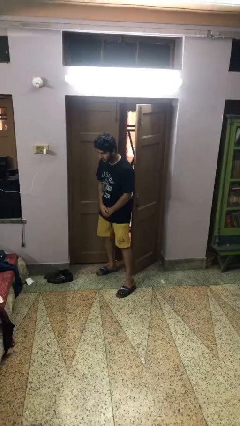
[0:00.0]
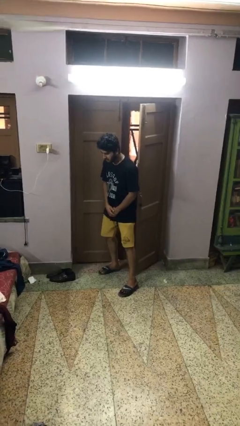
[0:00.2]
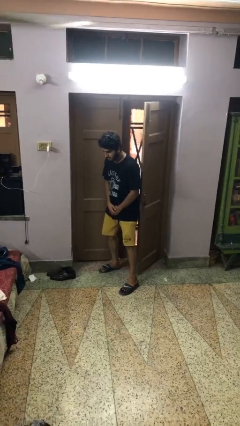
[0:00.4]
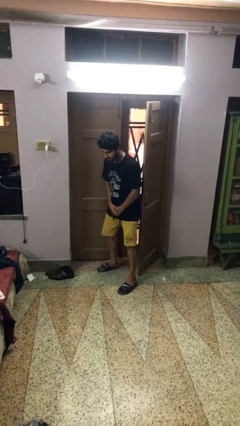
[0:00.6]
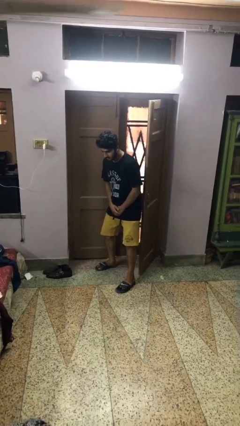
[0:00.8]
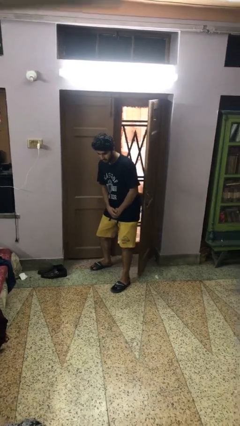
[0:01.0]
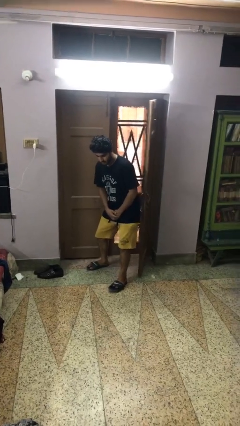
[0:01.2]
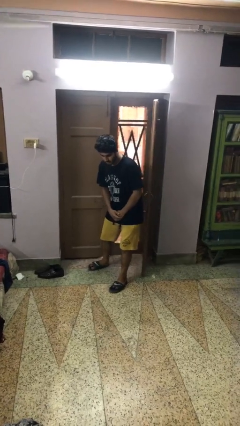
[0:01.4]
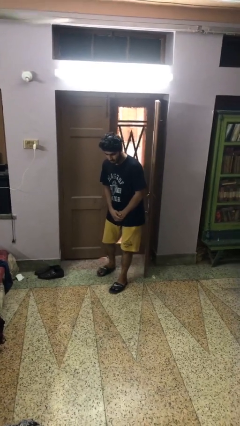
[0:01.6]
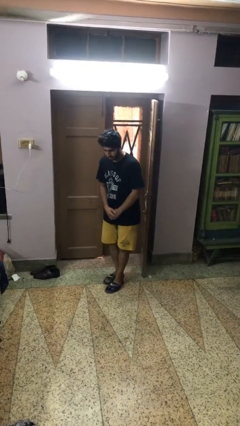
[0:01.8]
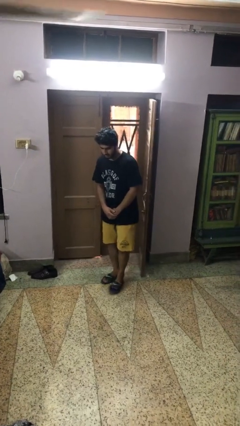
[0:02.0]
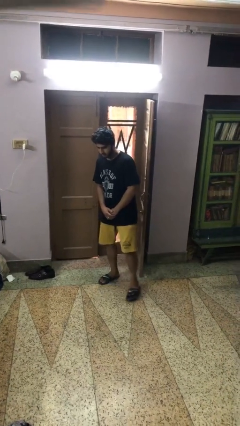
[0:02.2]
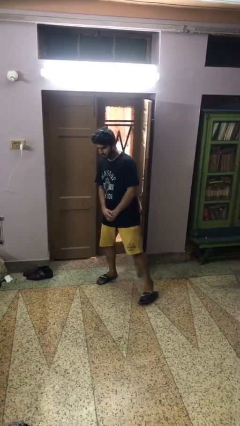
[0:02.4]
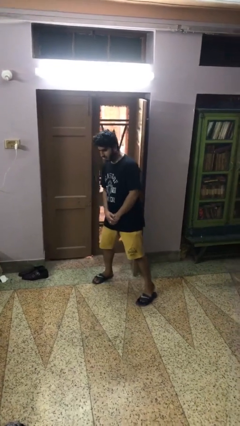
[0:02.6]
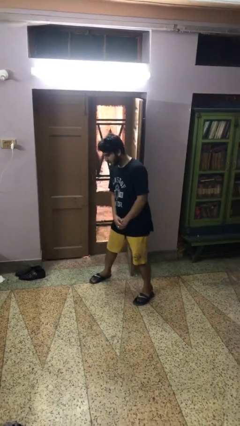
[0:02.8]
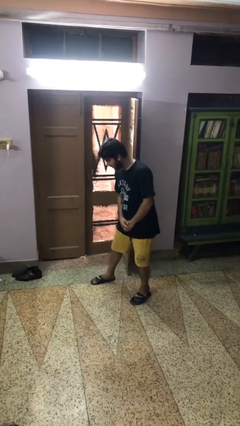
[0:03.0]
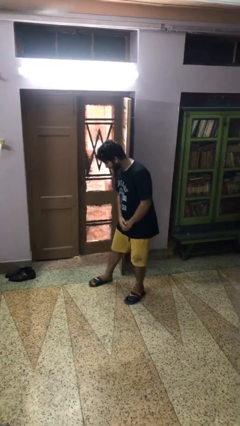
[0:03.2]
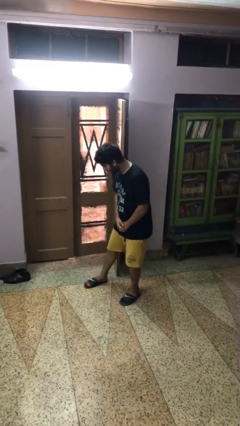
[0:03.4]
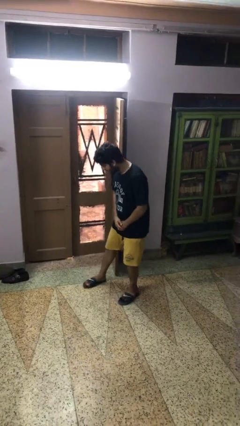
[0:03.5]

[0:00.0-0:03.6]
person opens facility door

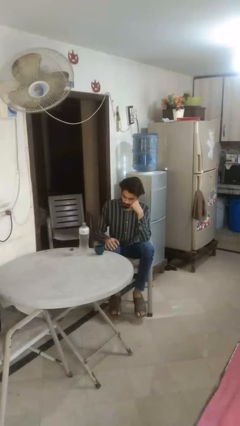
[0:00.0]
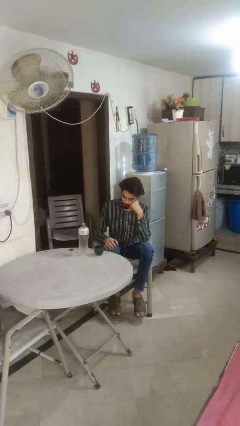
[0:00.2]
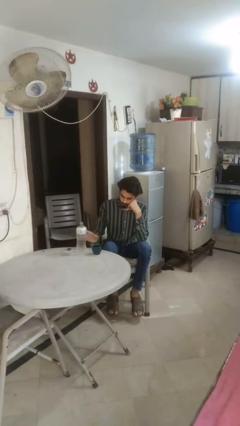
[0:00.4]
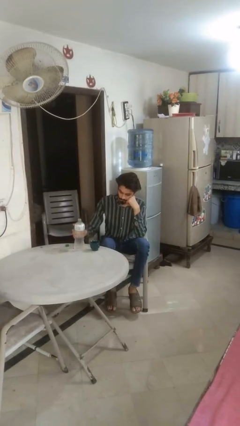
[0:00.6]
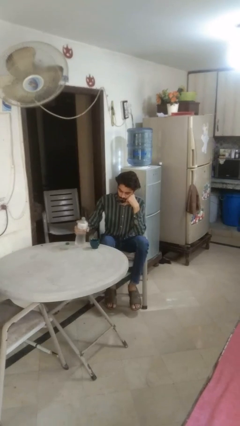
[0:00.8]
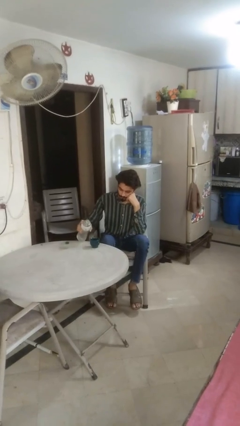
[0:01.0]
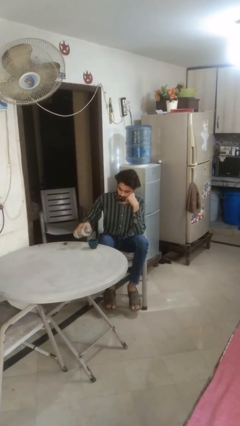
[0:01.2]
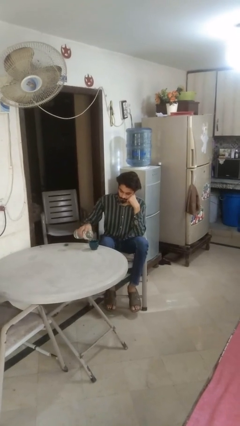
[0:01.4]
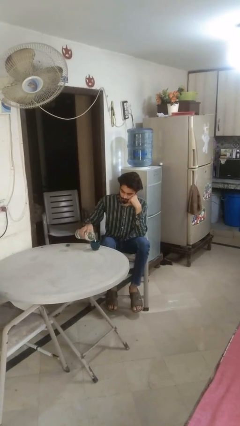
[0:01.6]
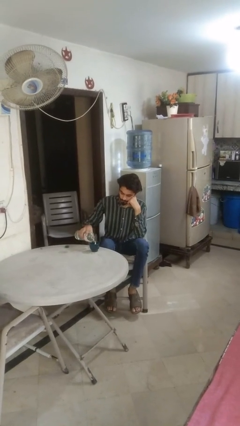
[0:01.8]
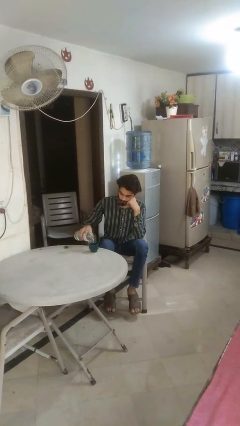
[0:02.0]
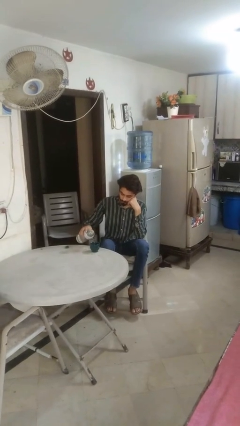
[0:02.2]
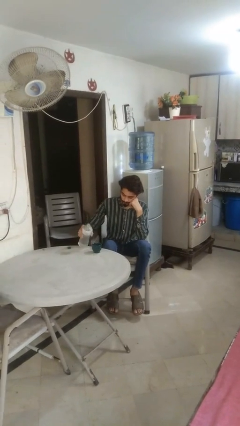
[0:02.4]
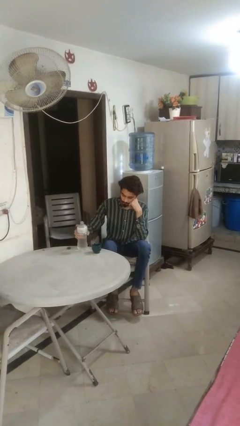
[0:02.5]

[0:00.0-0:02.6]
person pours liquid into cup

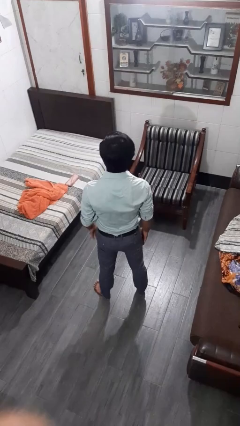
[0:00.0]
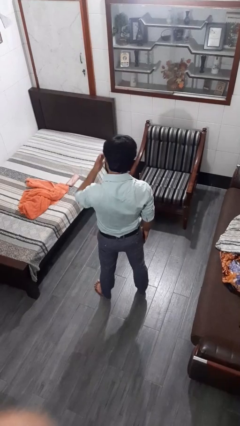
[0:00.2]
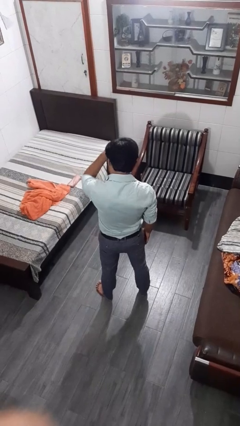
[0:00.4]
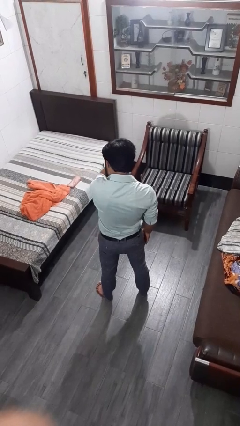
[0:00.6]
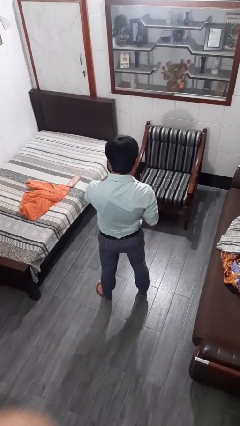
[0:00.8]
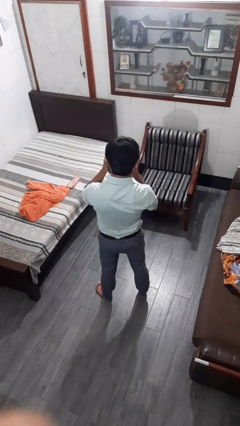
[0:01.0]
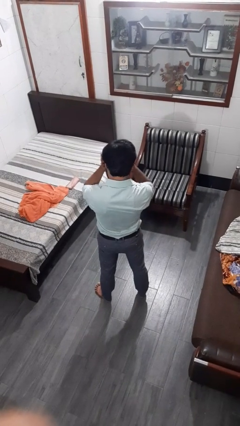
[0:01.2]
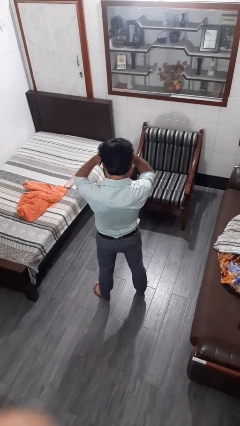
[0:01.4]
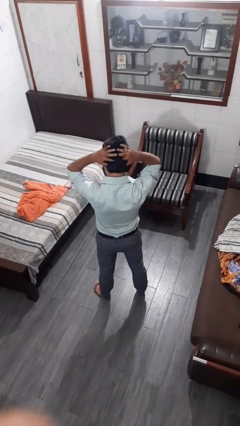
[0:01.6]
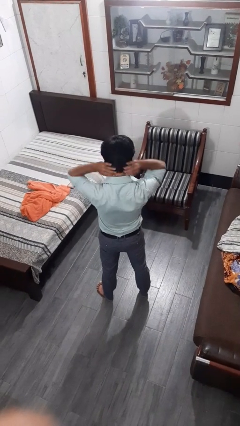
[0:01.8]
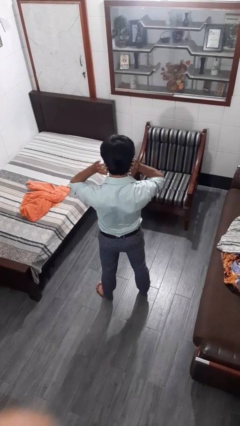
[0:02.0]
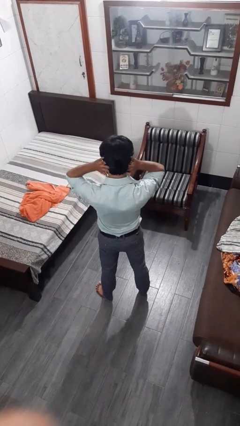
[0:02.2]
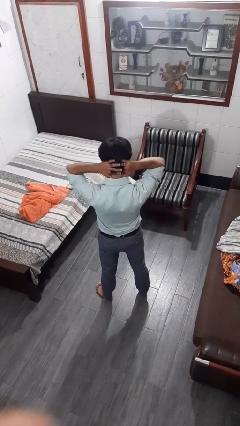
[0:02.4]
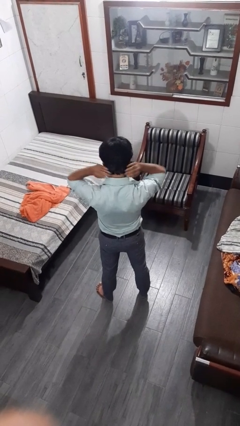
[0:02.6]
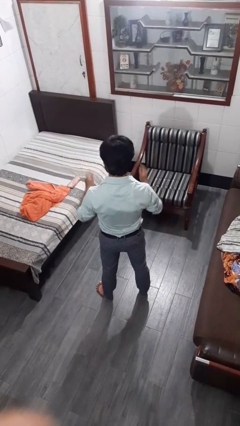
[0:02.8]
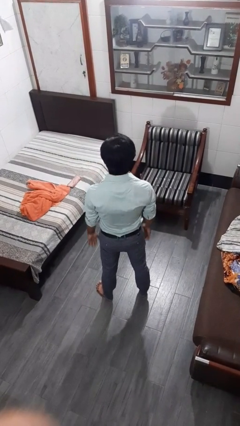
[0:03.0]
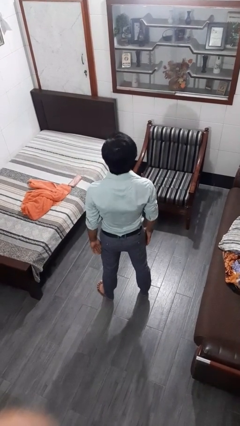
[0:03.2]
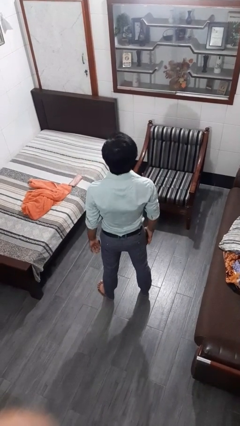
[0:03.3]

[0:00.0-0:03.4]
person strokes hair

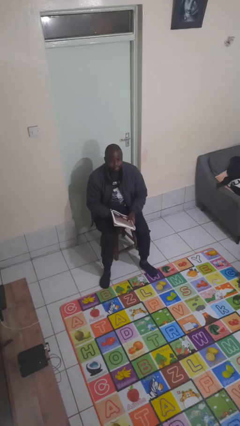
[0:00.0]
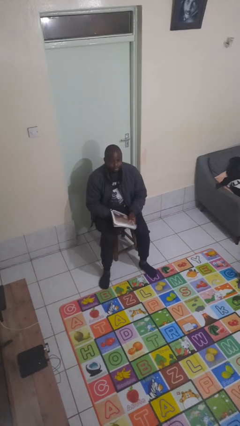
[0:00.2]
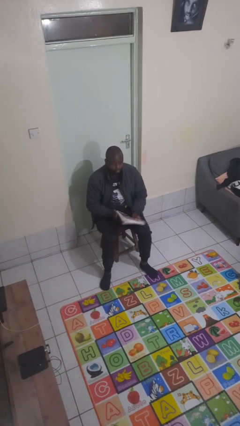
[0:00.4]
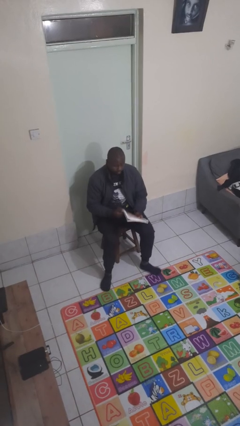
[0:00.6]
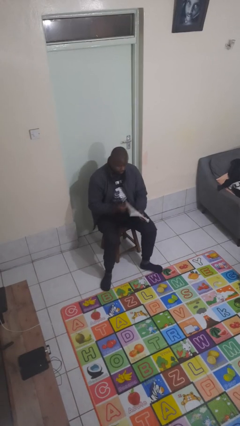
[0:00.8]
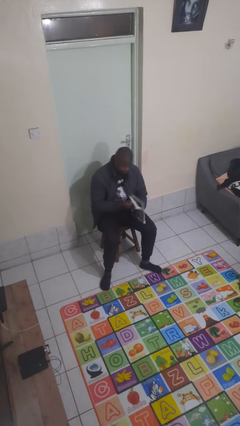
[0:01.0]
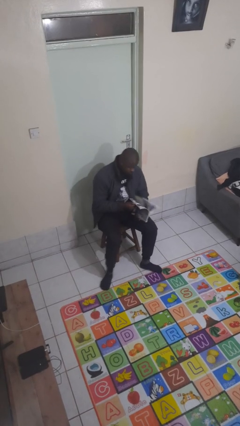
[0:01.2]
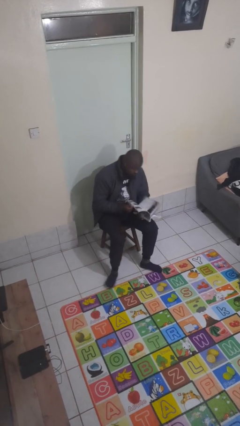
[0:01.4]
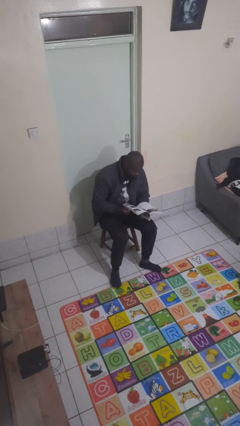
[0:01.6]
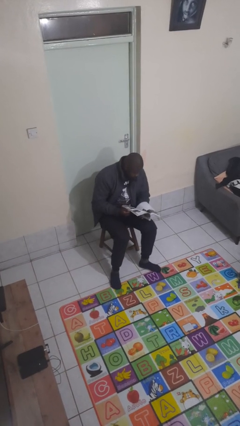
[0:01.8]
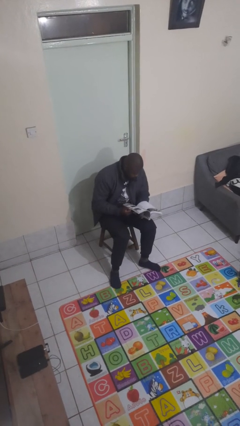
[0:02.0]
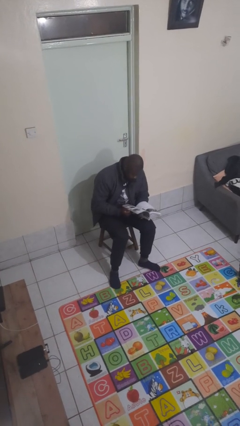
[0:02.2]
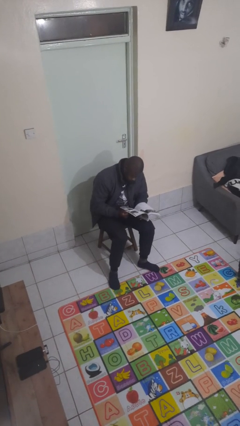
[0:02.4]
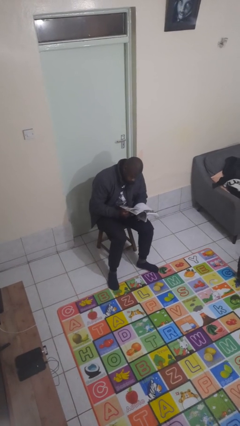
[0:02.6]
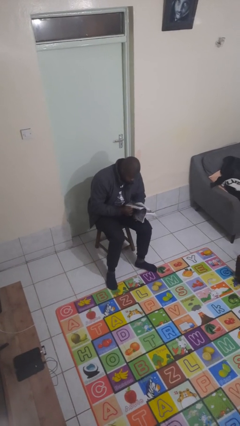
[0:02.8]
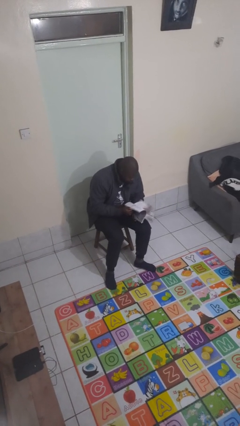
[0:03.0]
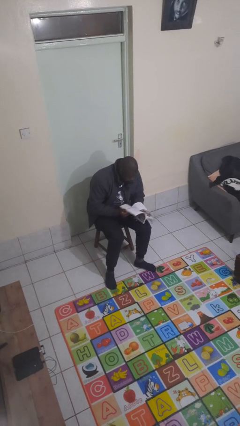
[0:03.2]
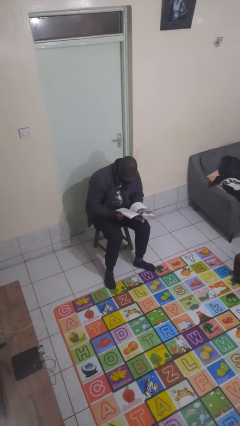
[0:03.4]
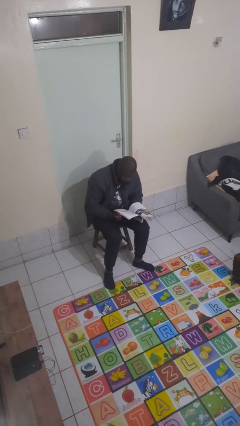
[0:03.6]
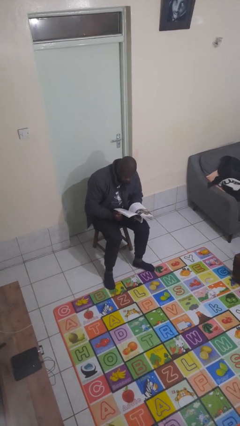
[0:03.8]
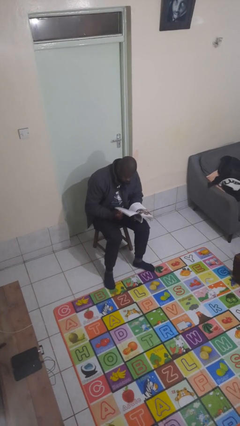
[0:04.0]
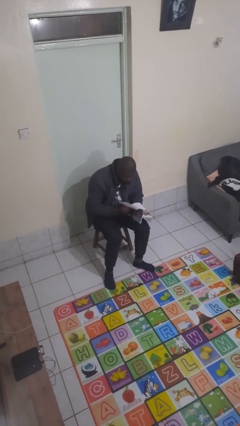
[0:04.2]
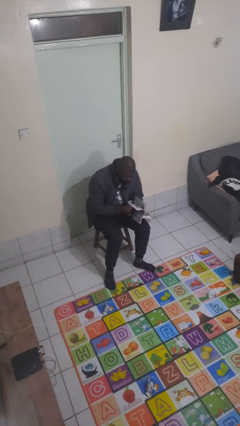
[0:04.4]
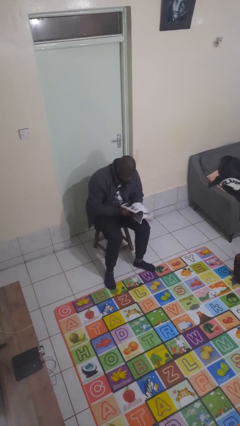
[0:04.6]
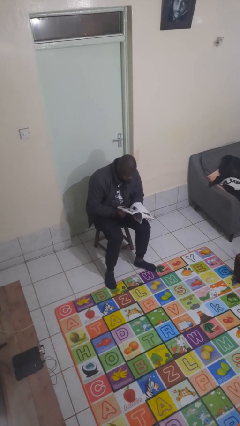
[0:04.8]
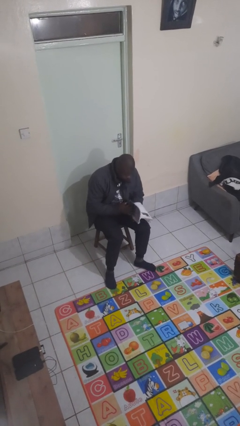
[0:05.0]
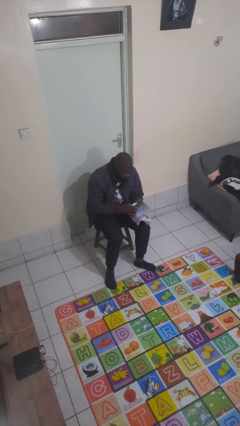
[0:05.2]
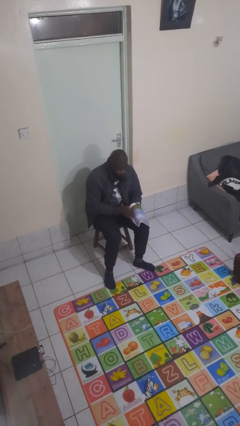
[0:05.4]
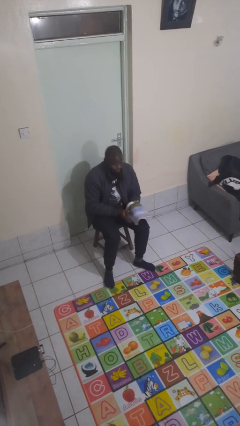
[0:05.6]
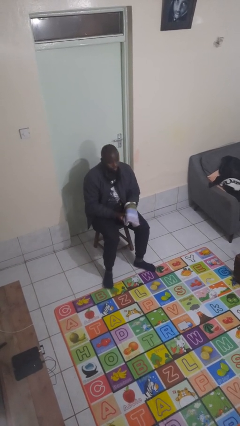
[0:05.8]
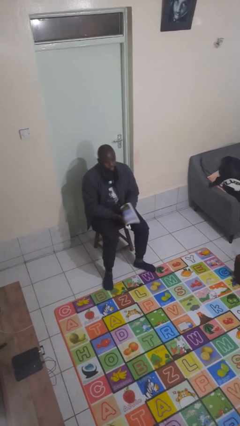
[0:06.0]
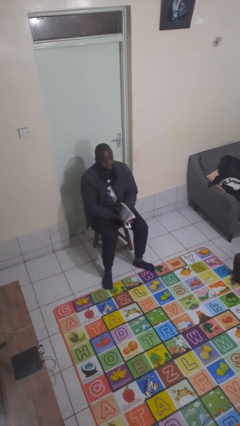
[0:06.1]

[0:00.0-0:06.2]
person reads magazine

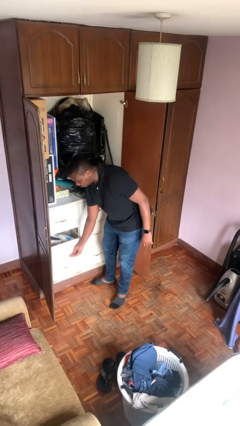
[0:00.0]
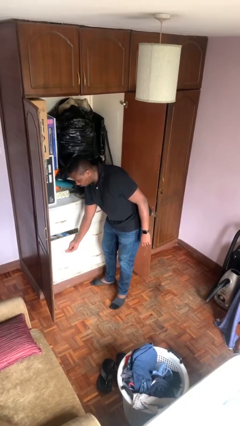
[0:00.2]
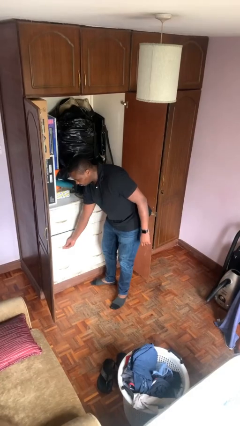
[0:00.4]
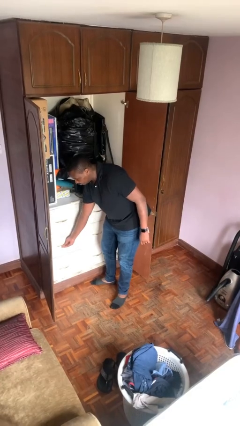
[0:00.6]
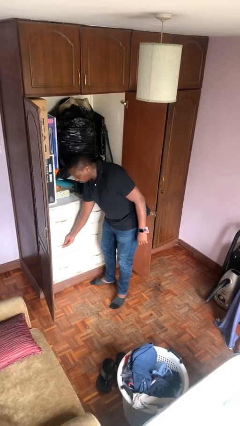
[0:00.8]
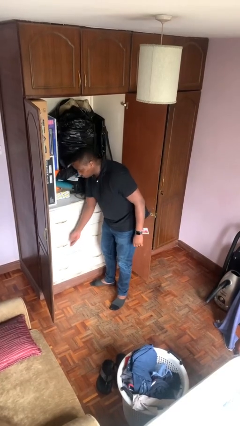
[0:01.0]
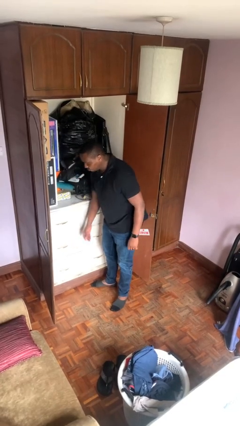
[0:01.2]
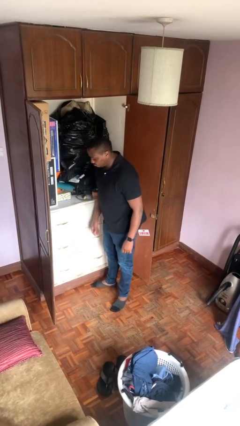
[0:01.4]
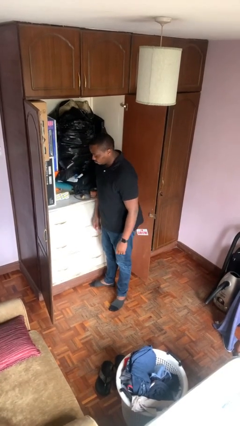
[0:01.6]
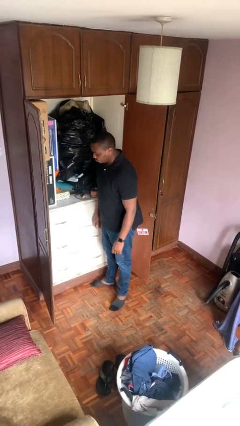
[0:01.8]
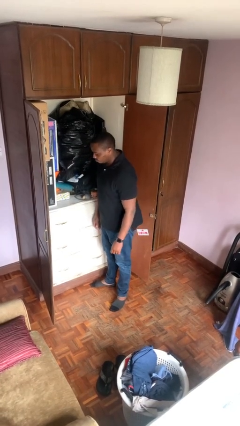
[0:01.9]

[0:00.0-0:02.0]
person closes dresser drawer
